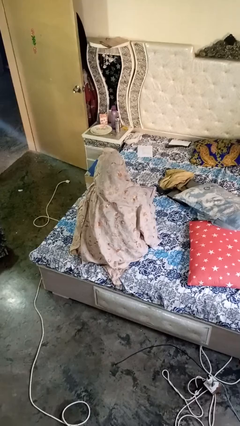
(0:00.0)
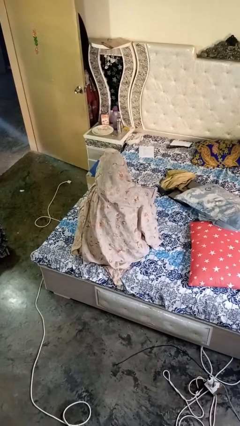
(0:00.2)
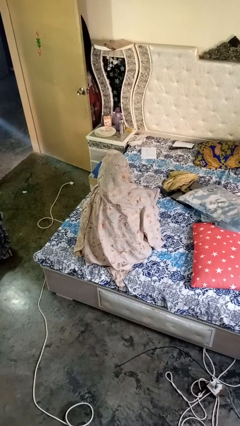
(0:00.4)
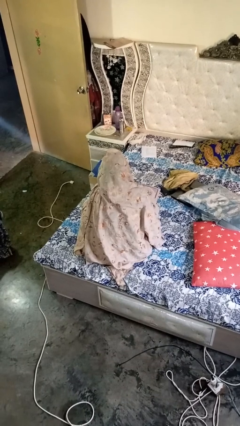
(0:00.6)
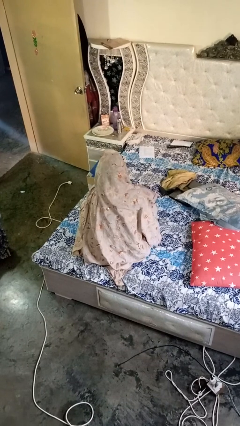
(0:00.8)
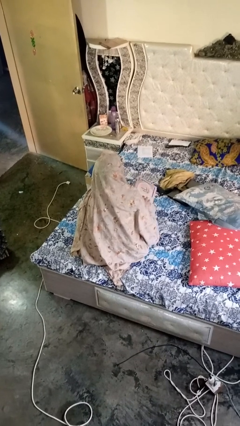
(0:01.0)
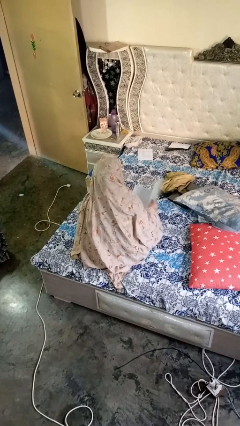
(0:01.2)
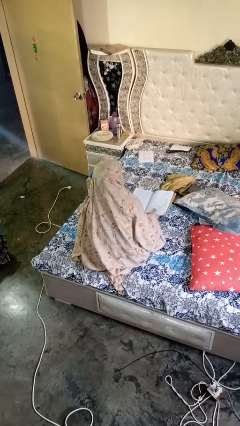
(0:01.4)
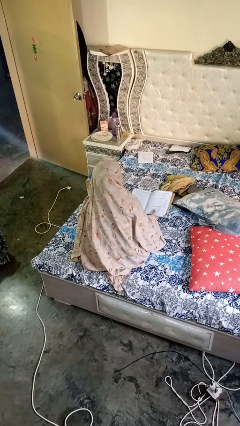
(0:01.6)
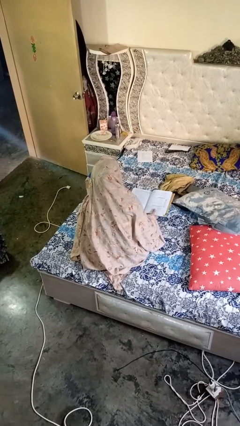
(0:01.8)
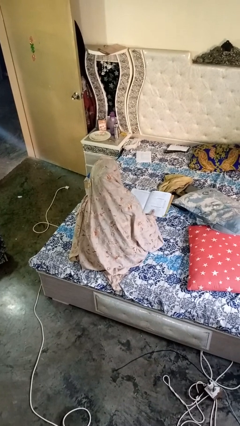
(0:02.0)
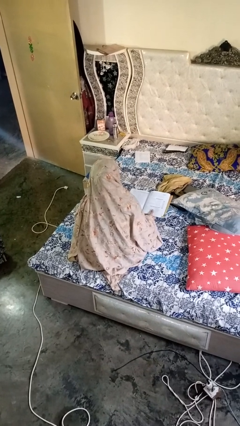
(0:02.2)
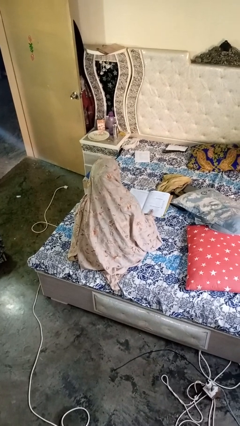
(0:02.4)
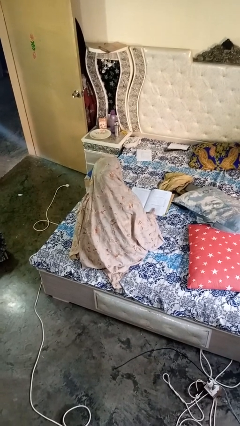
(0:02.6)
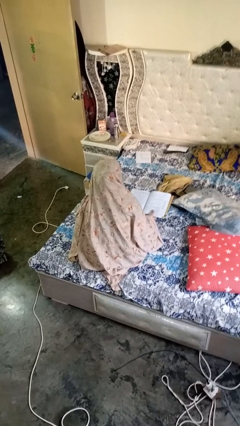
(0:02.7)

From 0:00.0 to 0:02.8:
person reads book

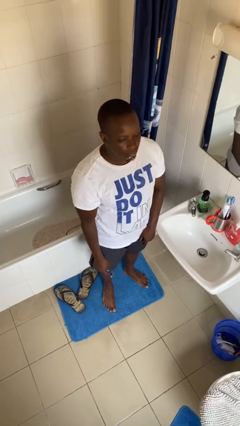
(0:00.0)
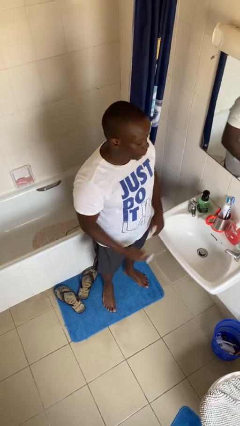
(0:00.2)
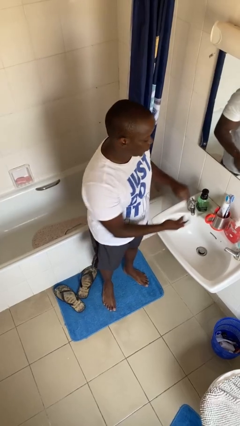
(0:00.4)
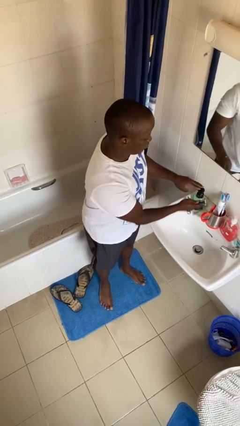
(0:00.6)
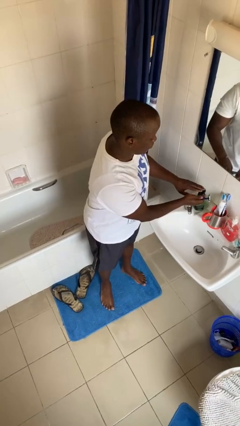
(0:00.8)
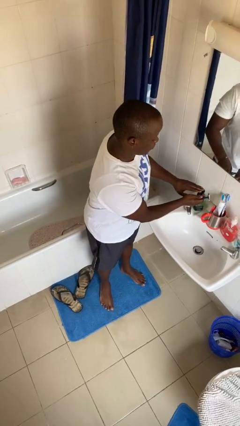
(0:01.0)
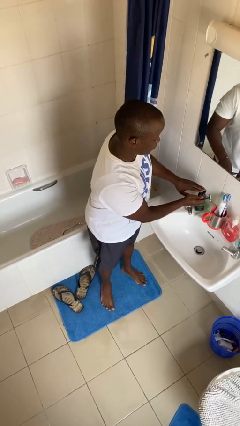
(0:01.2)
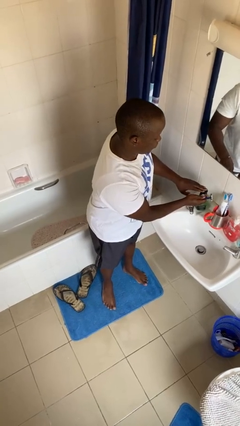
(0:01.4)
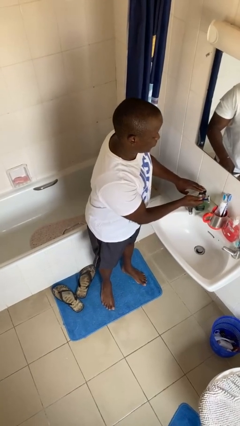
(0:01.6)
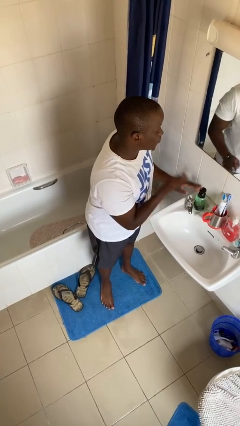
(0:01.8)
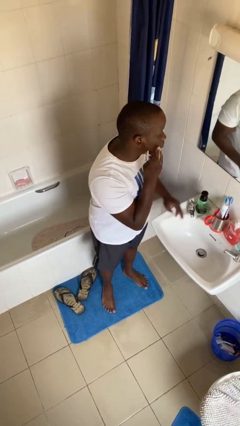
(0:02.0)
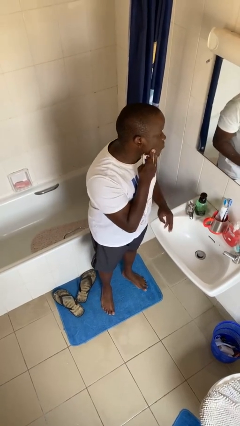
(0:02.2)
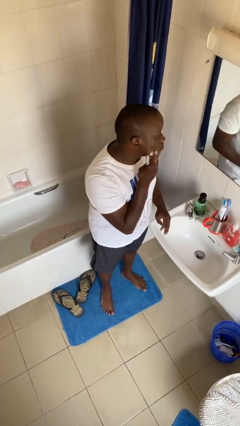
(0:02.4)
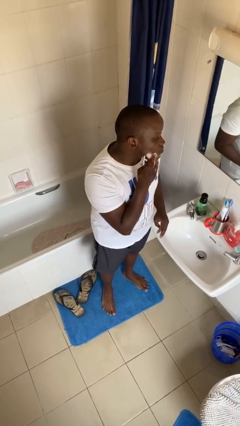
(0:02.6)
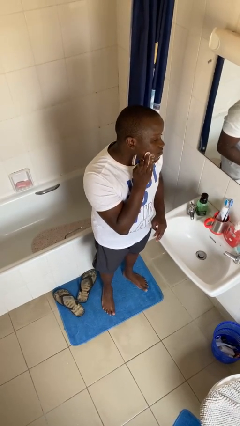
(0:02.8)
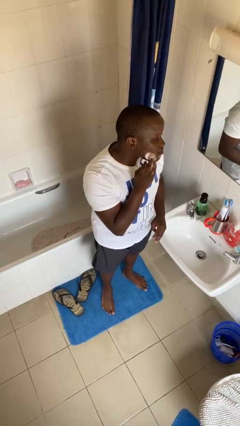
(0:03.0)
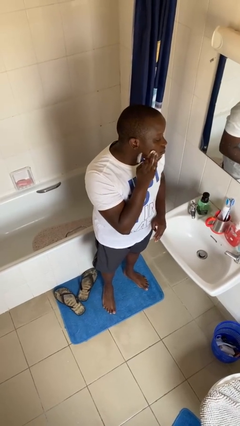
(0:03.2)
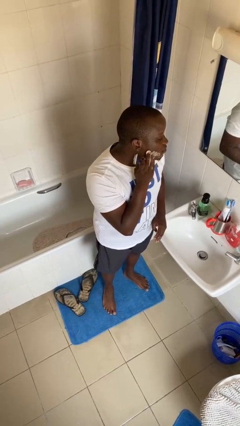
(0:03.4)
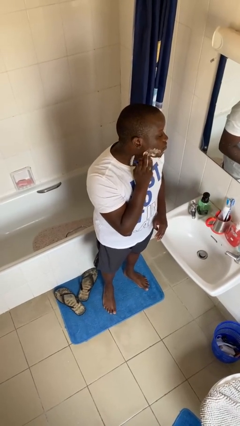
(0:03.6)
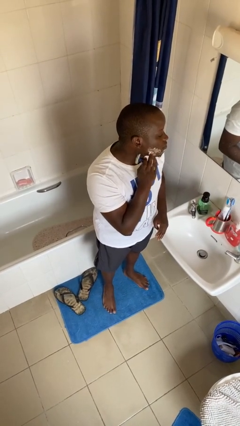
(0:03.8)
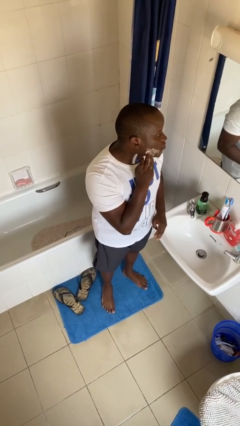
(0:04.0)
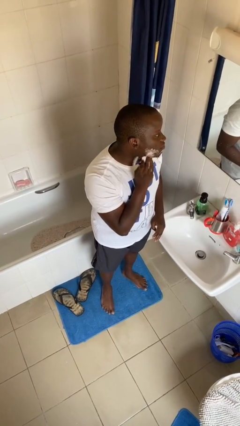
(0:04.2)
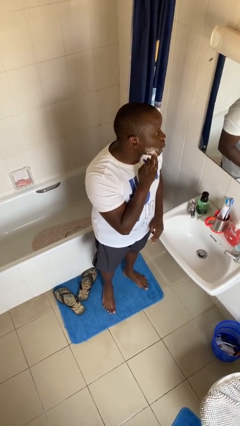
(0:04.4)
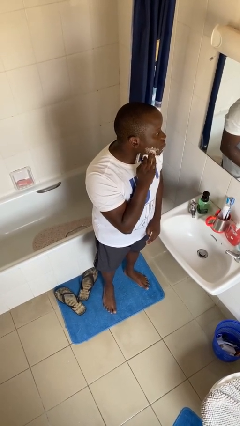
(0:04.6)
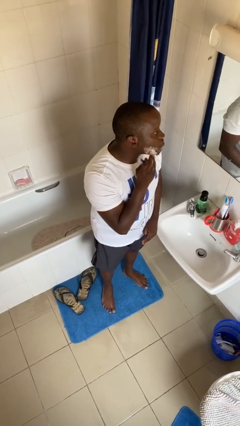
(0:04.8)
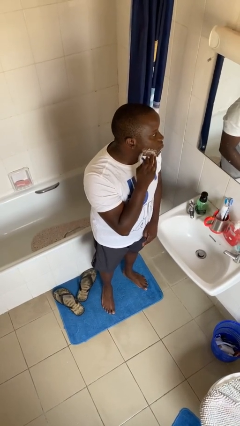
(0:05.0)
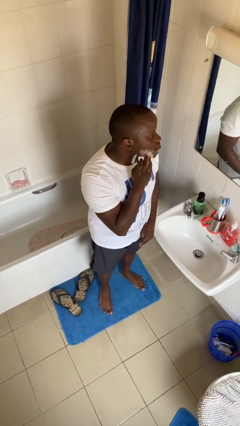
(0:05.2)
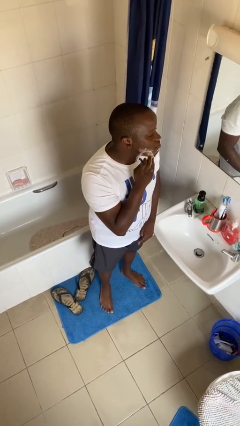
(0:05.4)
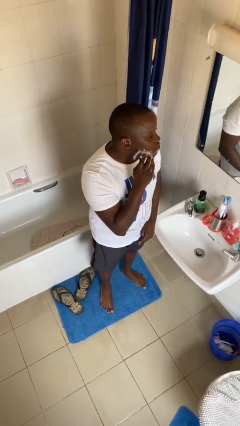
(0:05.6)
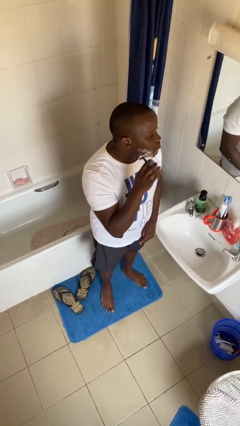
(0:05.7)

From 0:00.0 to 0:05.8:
person applies shaving cream

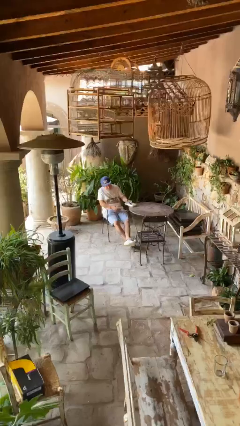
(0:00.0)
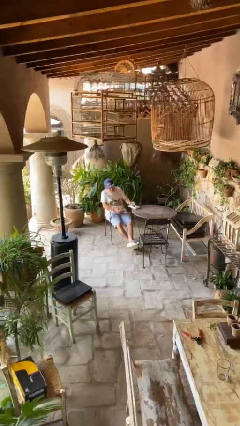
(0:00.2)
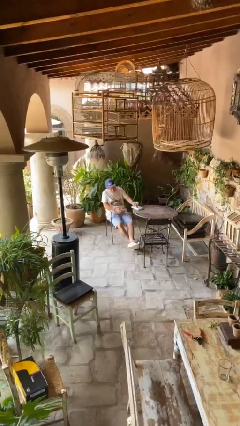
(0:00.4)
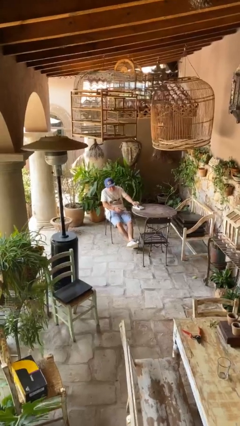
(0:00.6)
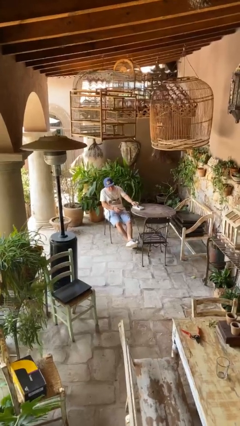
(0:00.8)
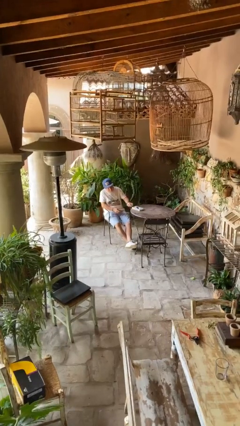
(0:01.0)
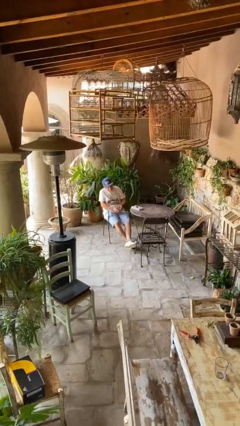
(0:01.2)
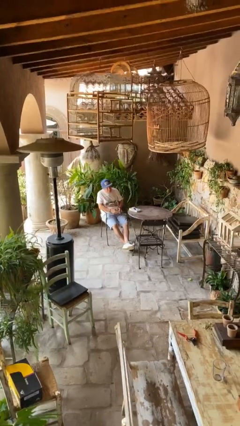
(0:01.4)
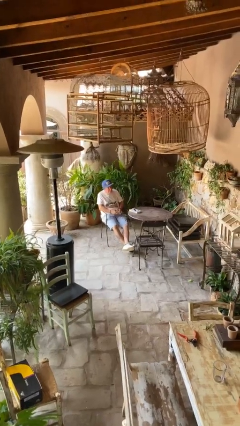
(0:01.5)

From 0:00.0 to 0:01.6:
person puts down object on table

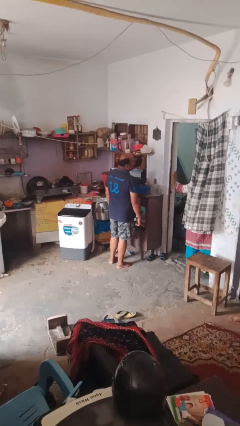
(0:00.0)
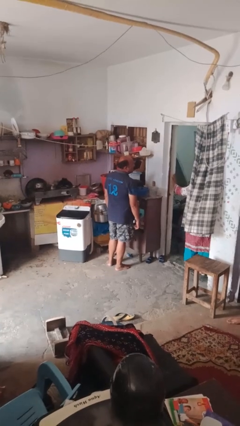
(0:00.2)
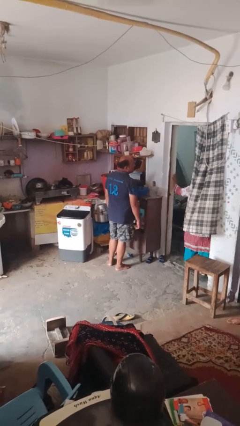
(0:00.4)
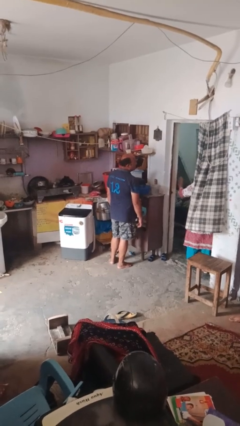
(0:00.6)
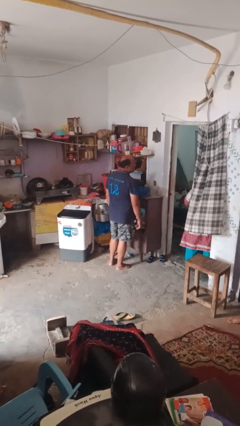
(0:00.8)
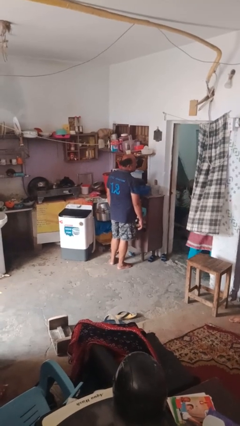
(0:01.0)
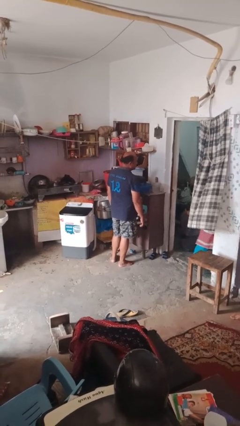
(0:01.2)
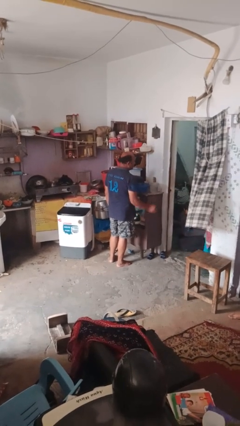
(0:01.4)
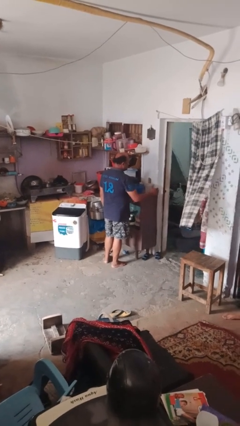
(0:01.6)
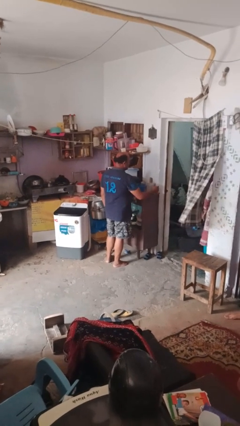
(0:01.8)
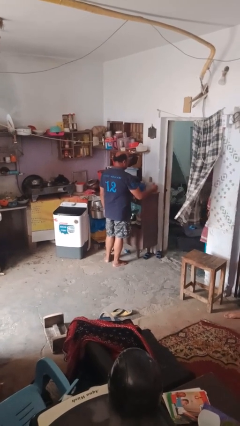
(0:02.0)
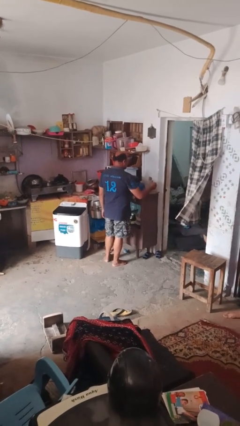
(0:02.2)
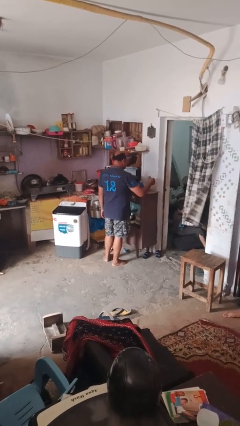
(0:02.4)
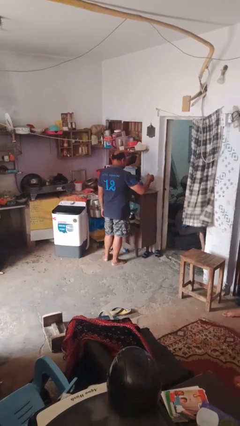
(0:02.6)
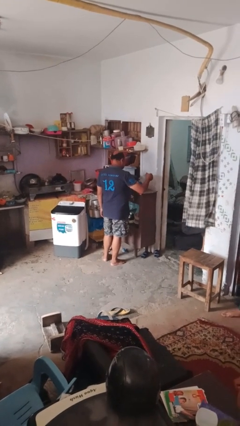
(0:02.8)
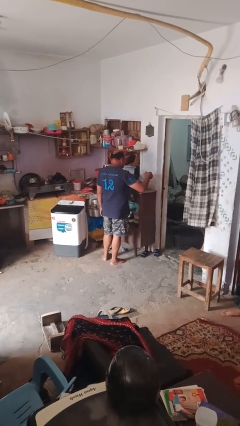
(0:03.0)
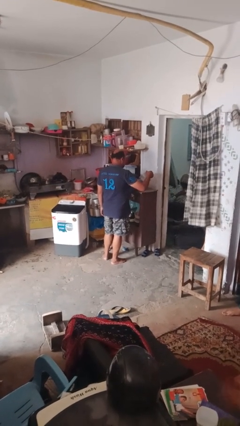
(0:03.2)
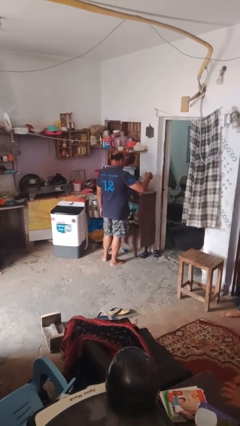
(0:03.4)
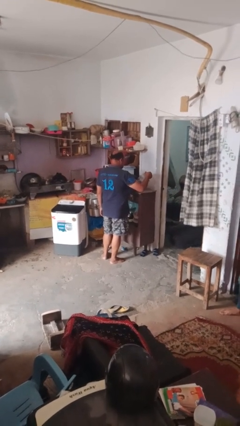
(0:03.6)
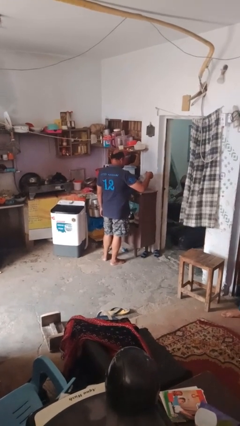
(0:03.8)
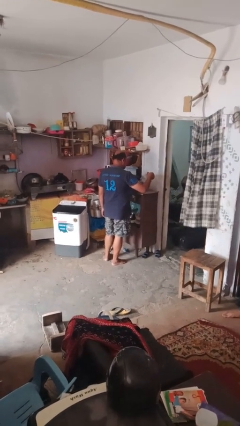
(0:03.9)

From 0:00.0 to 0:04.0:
person pours into bowl

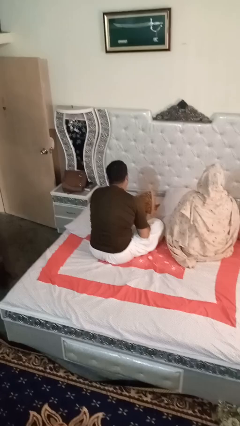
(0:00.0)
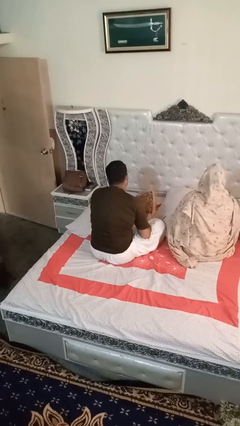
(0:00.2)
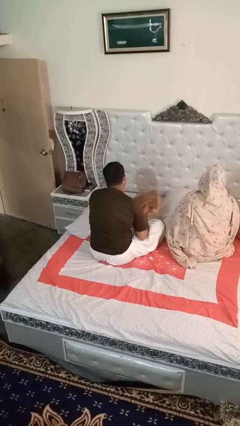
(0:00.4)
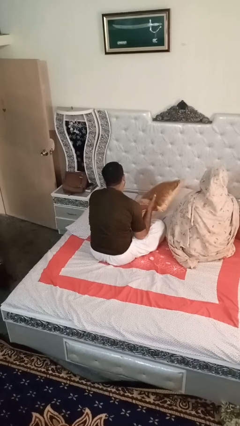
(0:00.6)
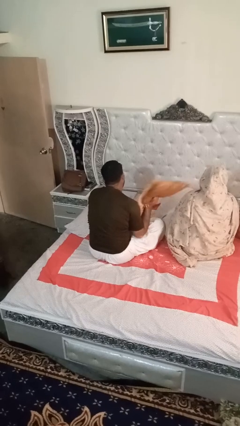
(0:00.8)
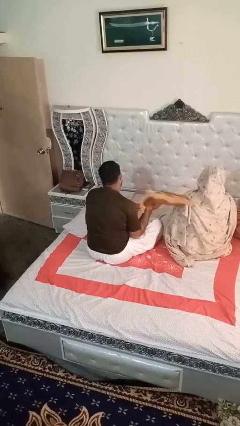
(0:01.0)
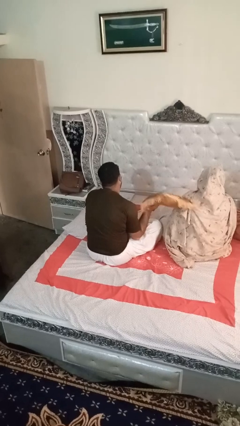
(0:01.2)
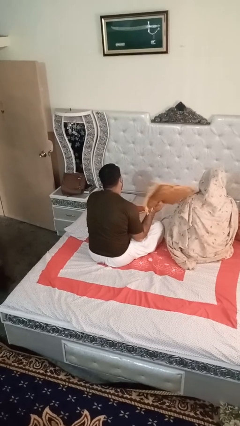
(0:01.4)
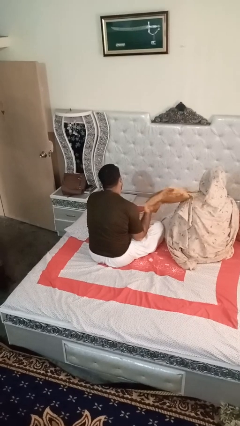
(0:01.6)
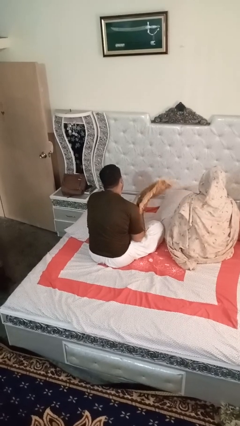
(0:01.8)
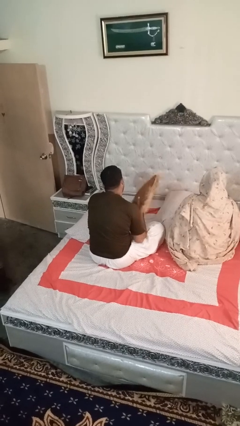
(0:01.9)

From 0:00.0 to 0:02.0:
person hits person with pillow

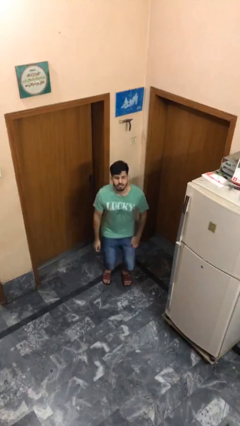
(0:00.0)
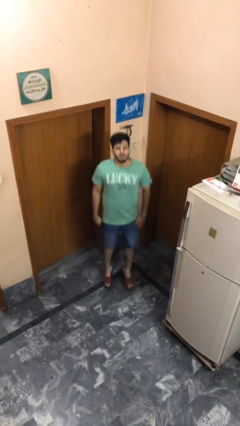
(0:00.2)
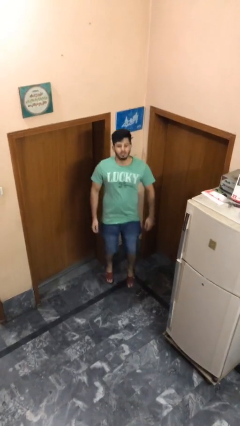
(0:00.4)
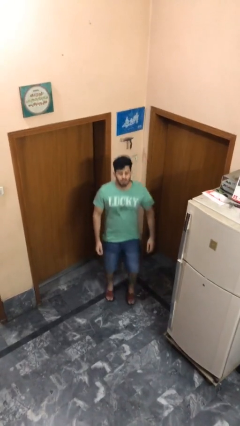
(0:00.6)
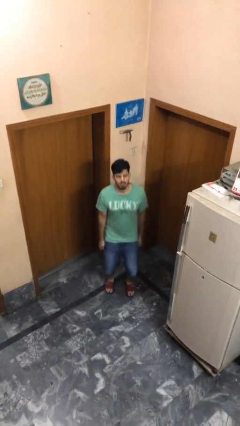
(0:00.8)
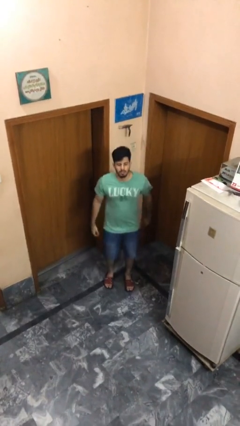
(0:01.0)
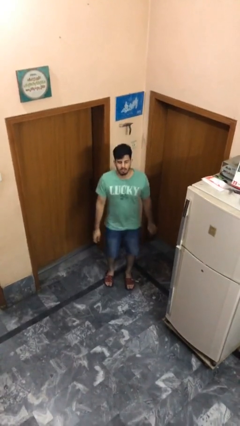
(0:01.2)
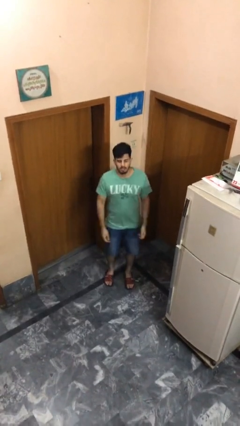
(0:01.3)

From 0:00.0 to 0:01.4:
person jumps
